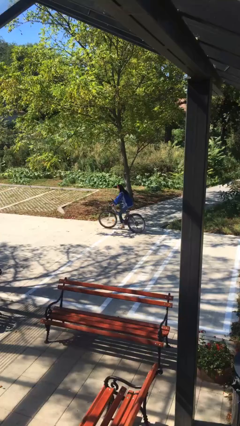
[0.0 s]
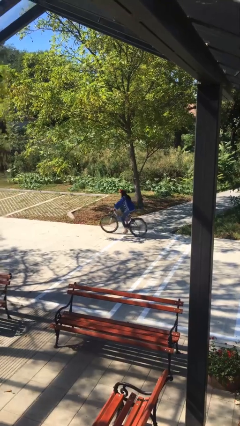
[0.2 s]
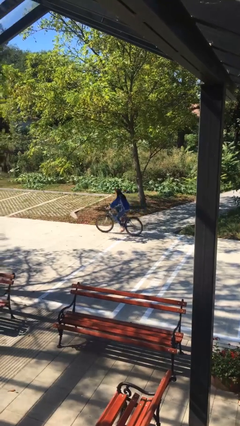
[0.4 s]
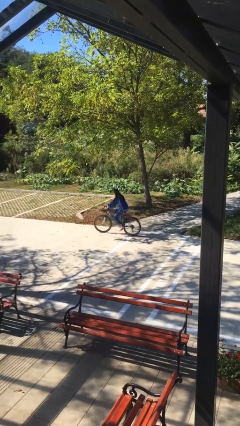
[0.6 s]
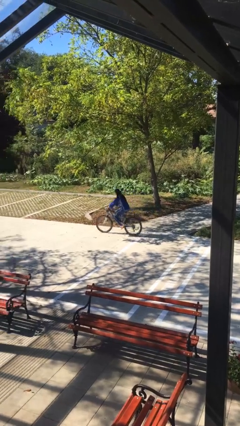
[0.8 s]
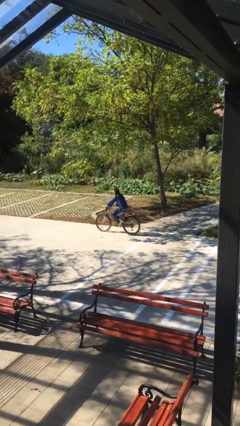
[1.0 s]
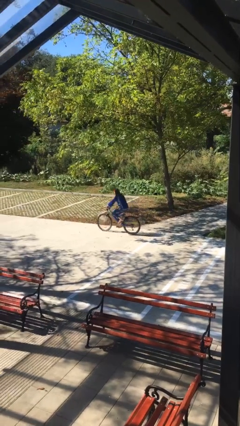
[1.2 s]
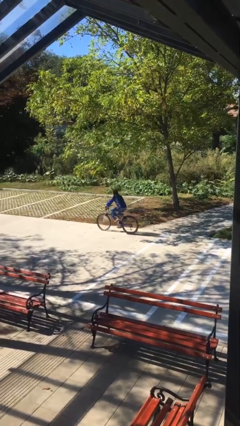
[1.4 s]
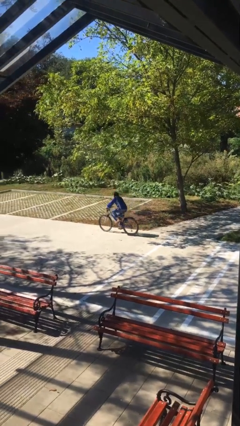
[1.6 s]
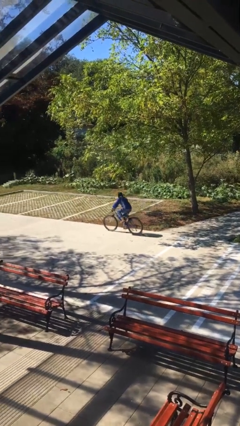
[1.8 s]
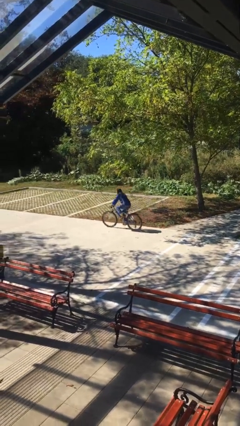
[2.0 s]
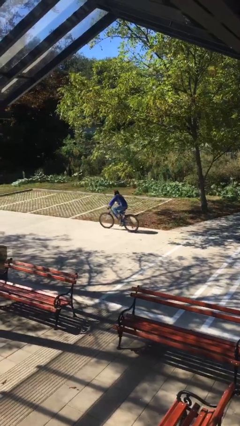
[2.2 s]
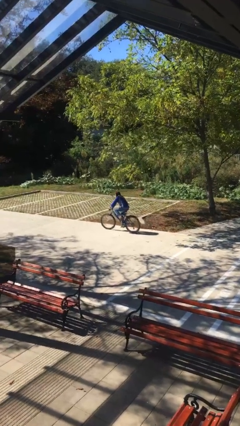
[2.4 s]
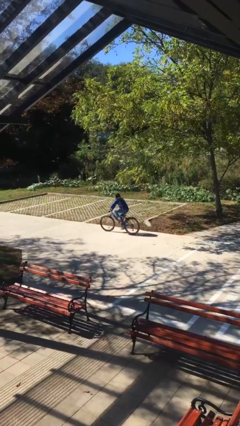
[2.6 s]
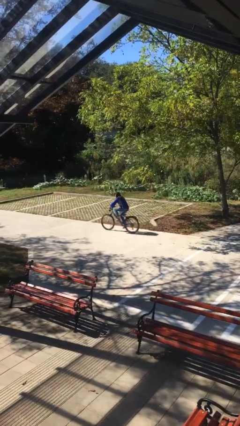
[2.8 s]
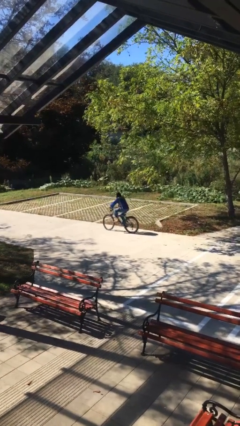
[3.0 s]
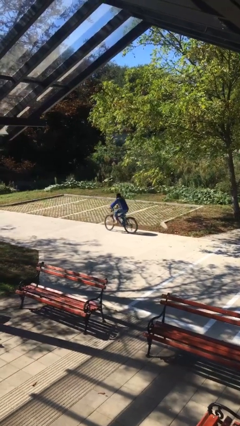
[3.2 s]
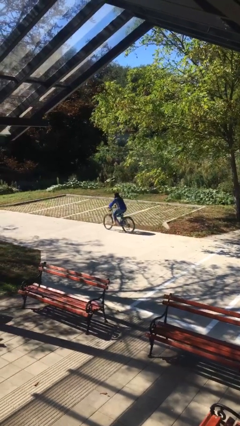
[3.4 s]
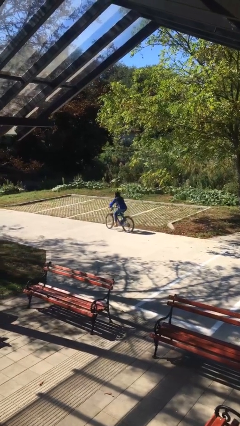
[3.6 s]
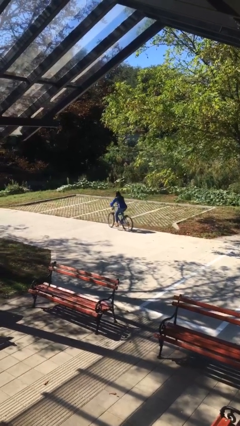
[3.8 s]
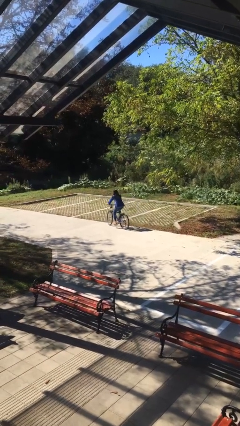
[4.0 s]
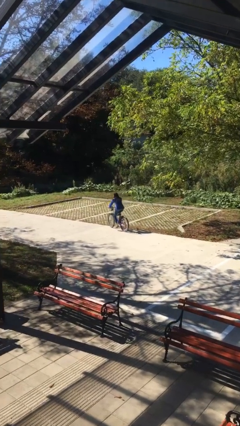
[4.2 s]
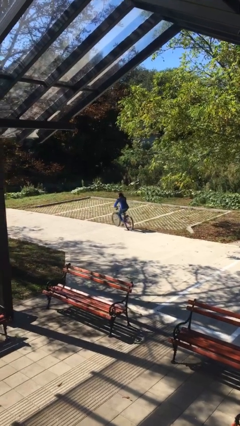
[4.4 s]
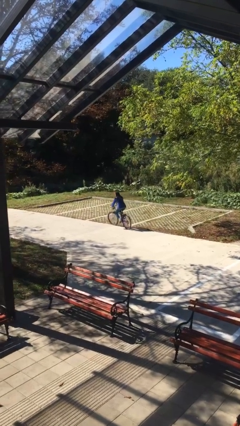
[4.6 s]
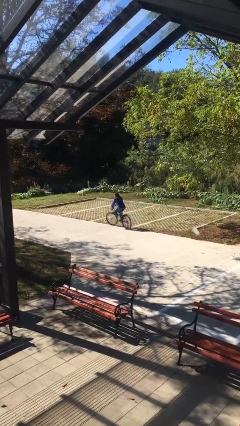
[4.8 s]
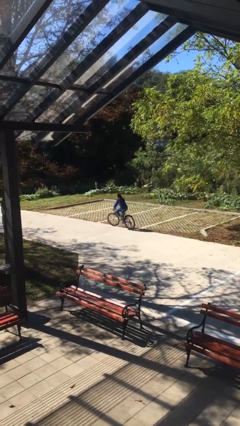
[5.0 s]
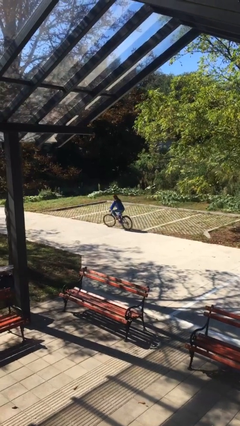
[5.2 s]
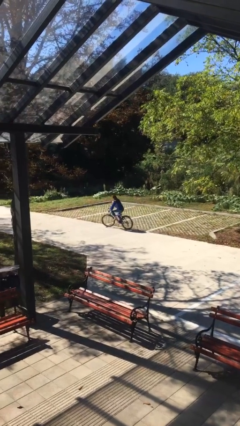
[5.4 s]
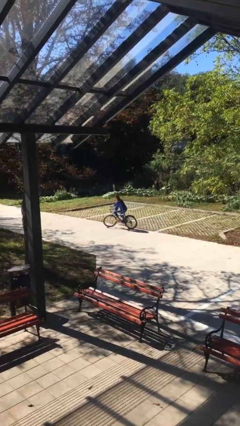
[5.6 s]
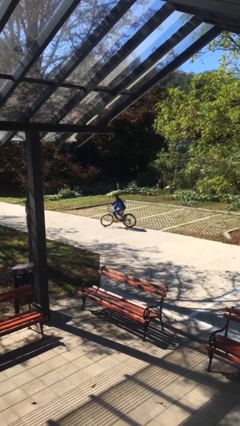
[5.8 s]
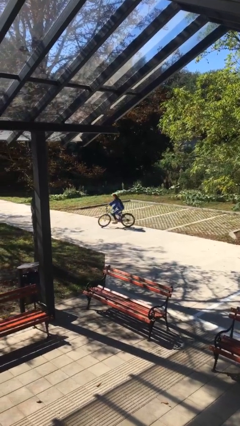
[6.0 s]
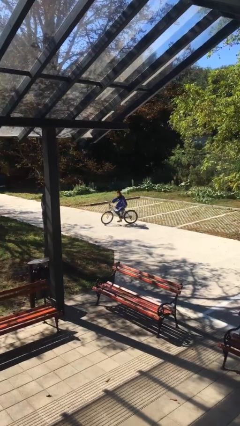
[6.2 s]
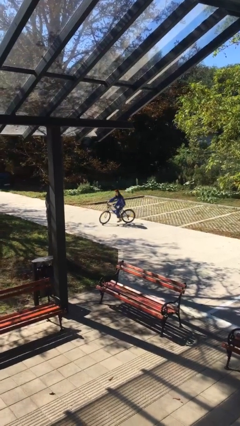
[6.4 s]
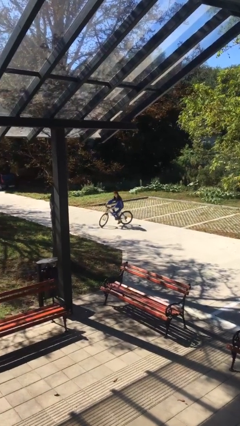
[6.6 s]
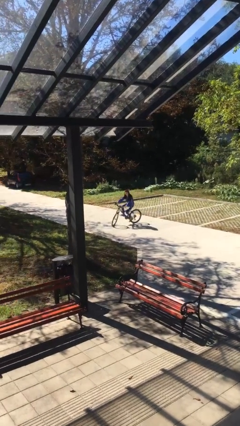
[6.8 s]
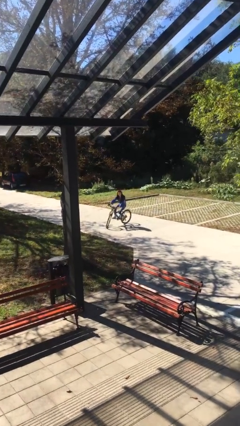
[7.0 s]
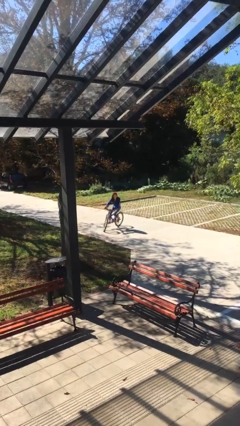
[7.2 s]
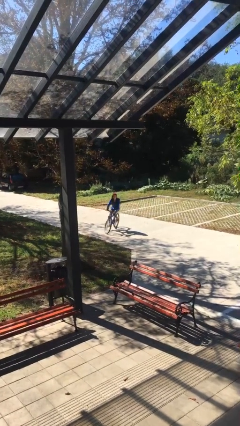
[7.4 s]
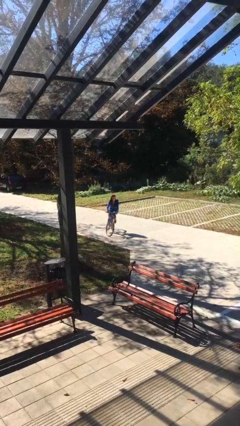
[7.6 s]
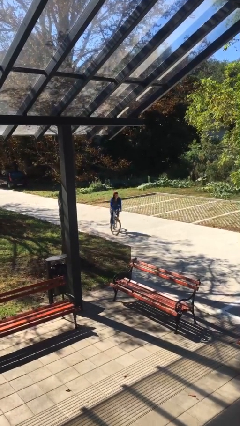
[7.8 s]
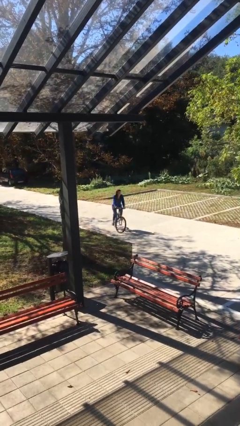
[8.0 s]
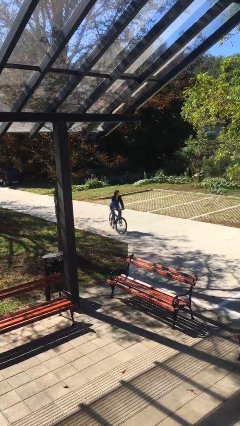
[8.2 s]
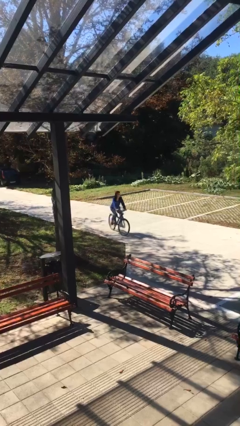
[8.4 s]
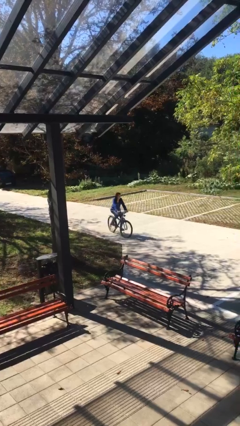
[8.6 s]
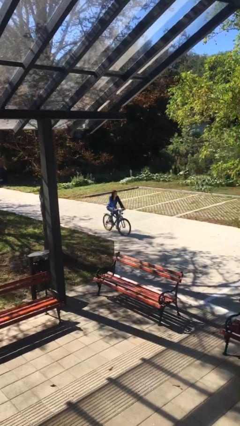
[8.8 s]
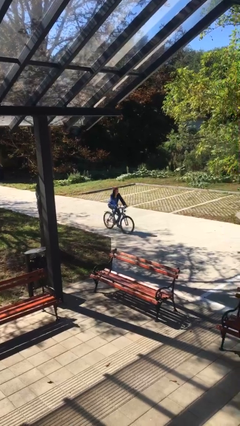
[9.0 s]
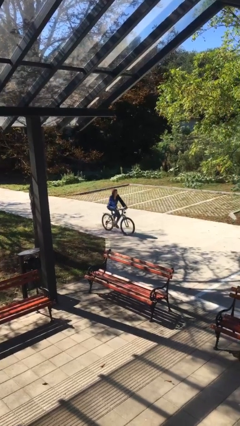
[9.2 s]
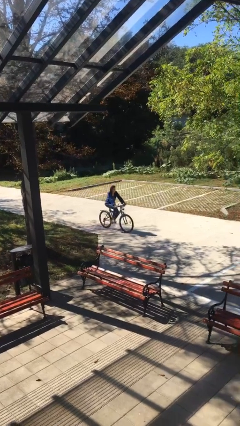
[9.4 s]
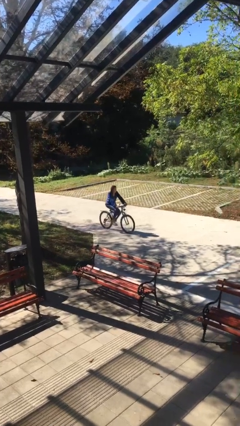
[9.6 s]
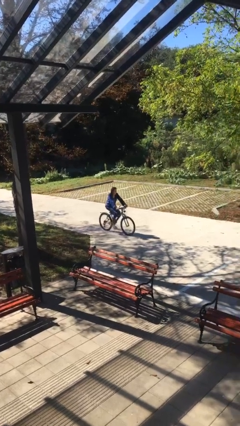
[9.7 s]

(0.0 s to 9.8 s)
person rides bicycle

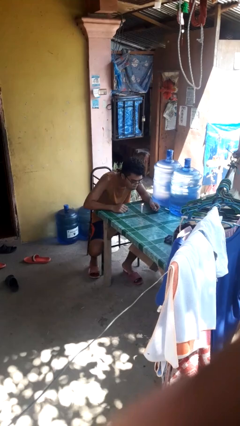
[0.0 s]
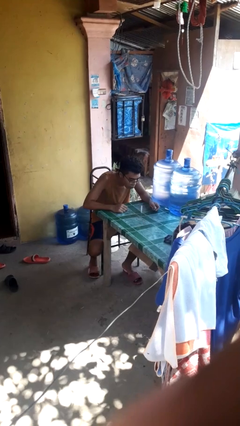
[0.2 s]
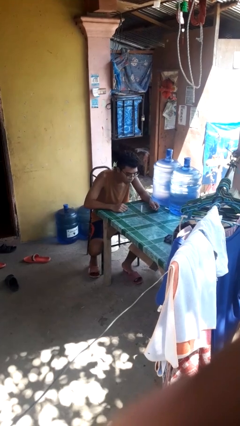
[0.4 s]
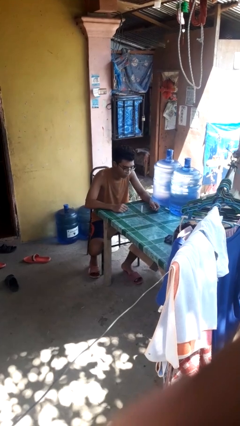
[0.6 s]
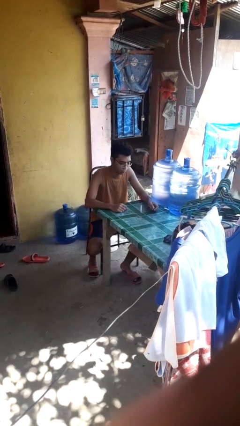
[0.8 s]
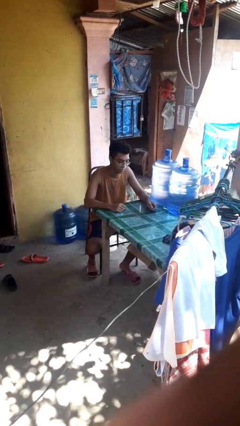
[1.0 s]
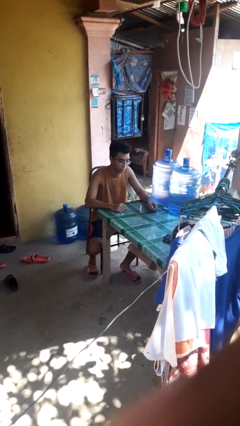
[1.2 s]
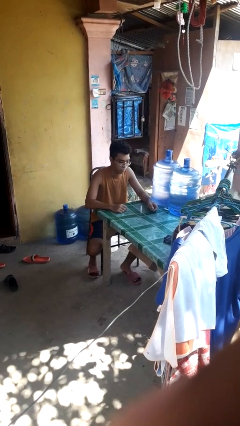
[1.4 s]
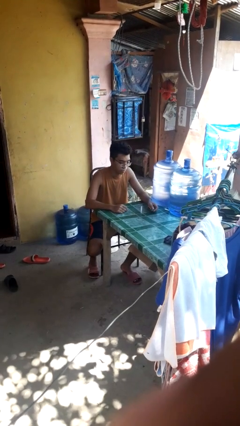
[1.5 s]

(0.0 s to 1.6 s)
person extinguishes candle

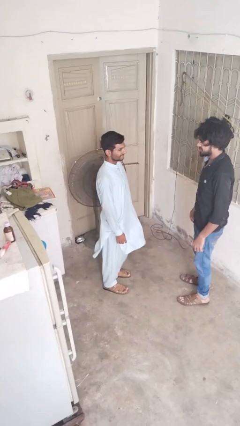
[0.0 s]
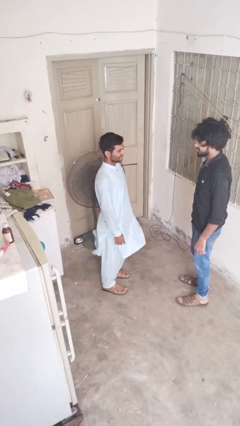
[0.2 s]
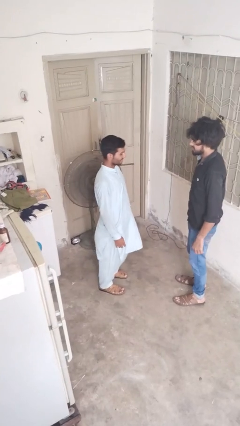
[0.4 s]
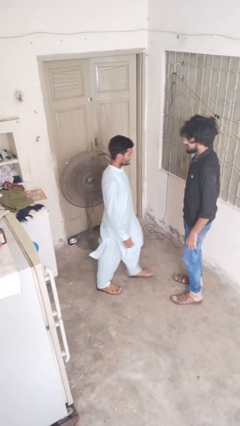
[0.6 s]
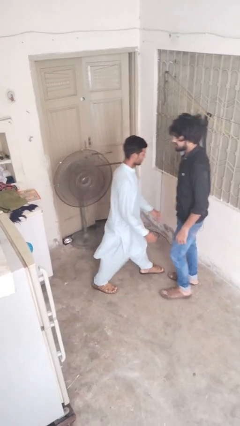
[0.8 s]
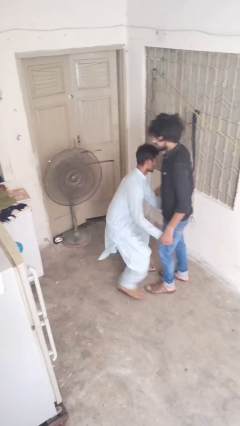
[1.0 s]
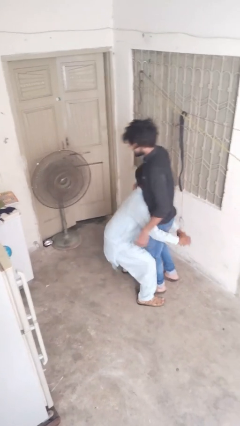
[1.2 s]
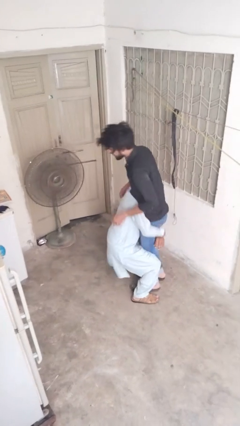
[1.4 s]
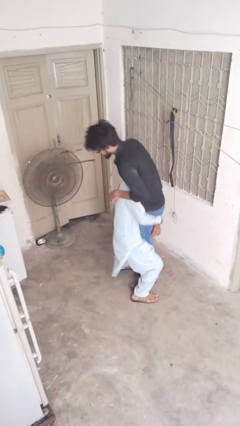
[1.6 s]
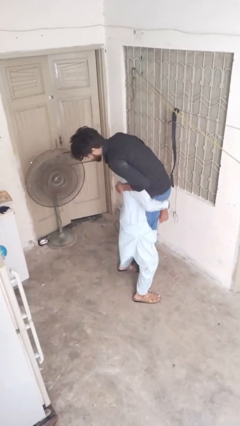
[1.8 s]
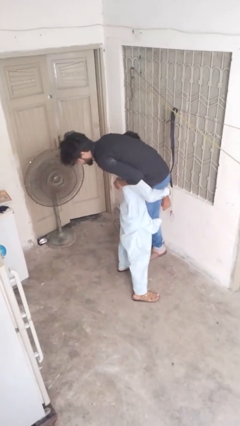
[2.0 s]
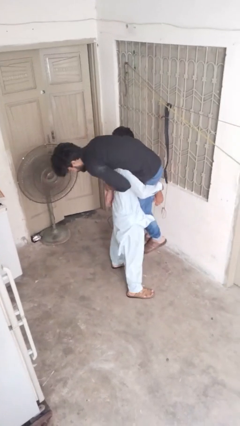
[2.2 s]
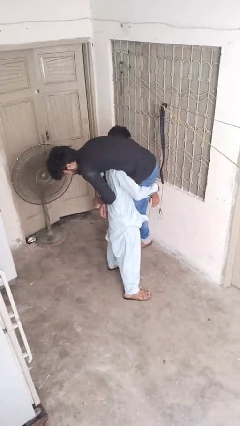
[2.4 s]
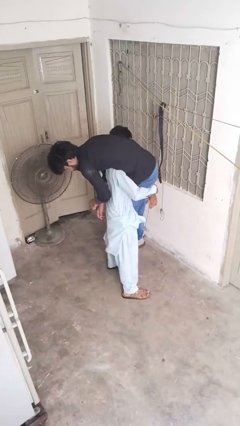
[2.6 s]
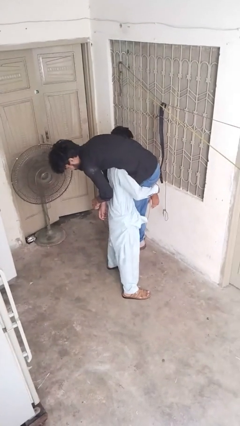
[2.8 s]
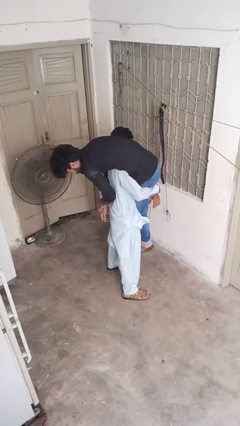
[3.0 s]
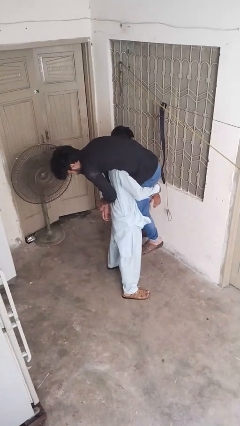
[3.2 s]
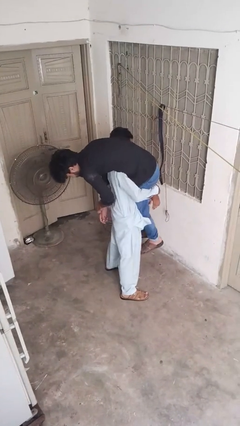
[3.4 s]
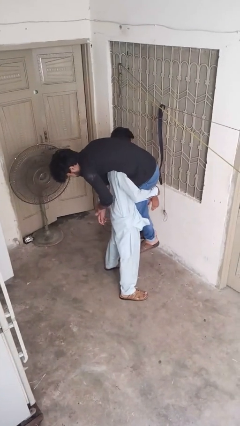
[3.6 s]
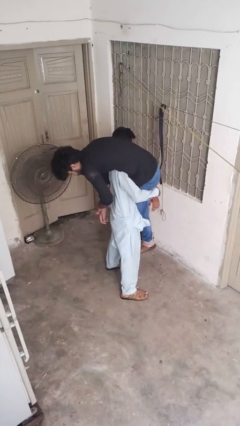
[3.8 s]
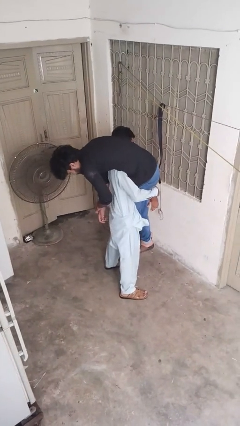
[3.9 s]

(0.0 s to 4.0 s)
person carries person over shoulder

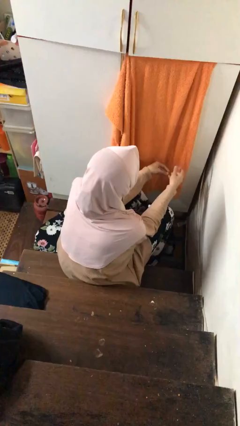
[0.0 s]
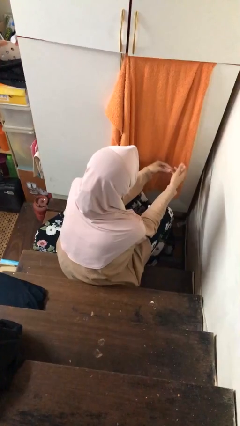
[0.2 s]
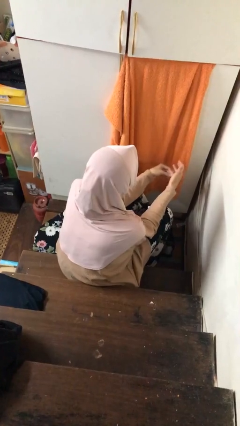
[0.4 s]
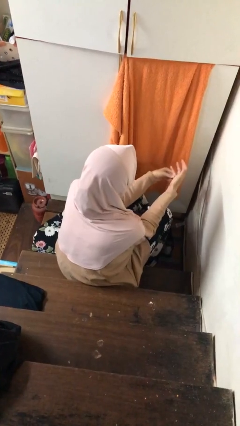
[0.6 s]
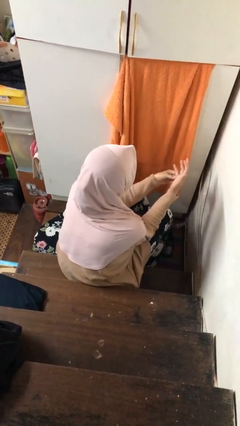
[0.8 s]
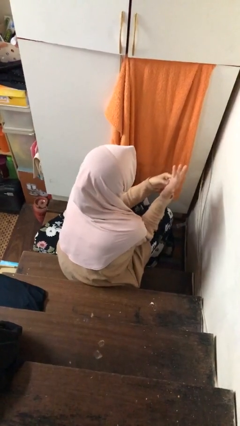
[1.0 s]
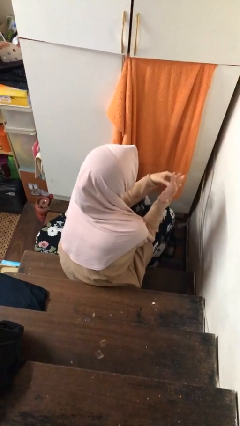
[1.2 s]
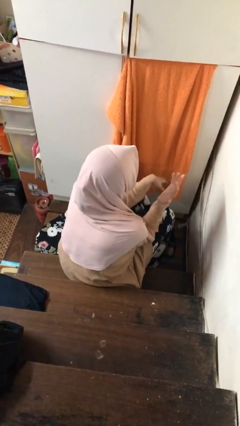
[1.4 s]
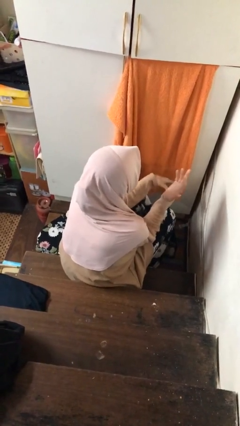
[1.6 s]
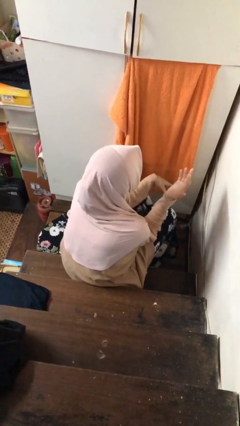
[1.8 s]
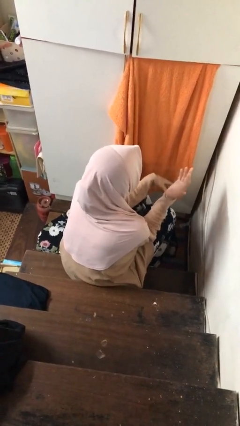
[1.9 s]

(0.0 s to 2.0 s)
person puts on ring

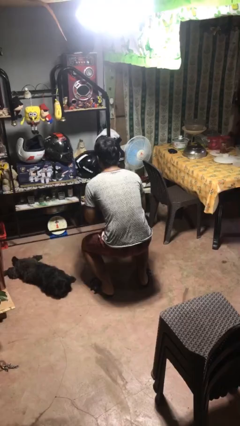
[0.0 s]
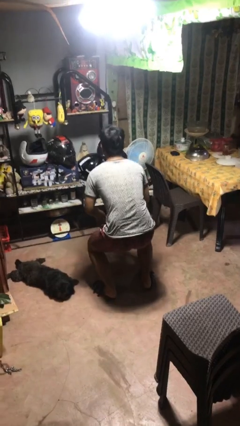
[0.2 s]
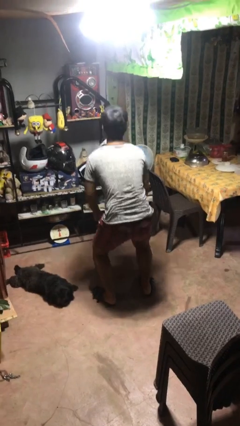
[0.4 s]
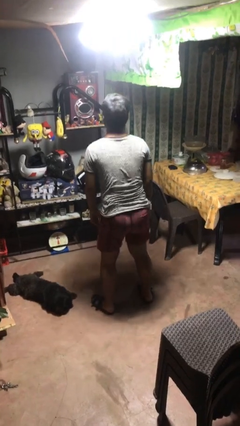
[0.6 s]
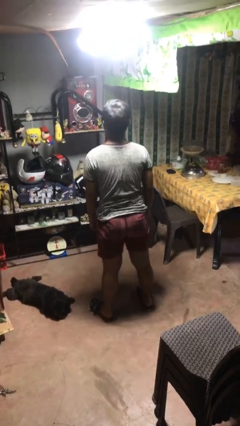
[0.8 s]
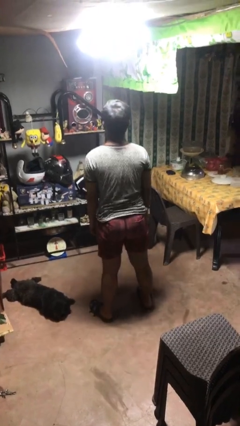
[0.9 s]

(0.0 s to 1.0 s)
person stands up
